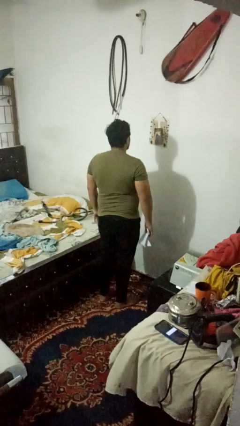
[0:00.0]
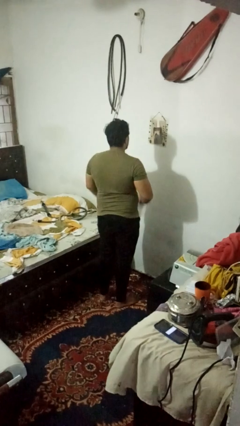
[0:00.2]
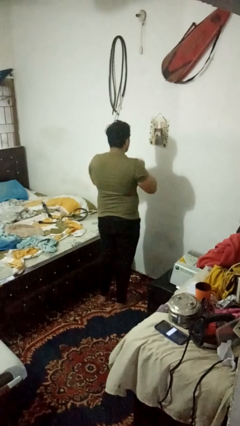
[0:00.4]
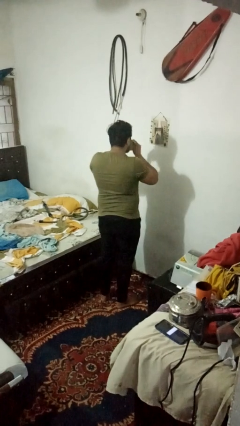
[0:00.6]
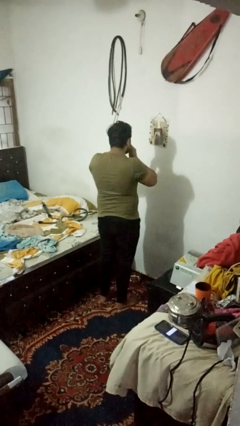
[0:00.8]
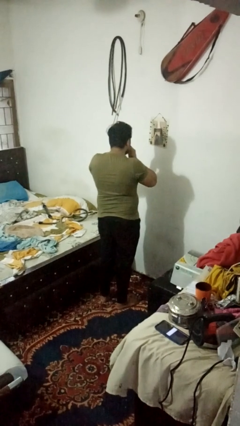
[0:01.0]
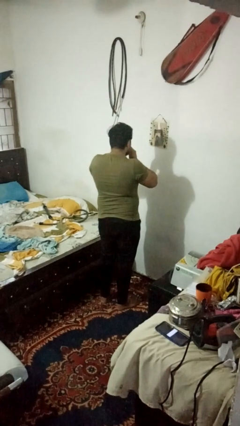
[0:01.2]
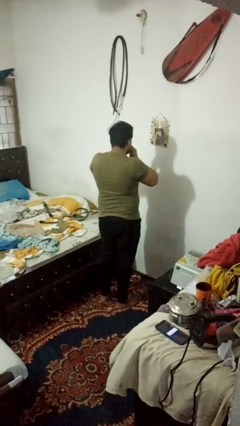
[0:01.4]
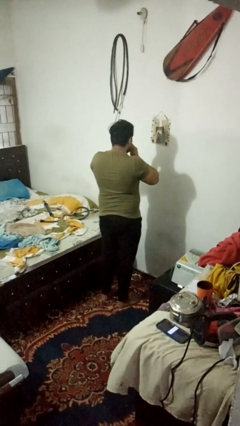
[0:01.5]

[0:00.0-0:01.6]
person blows nose

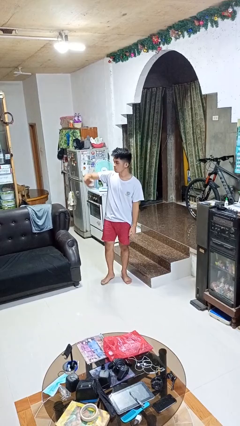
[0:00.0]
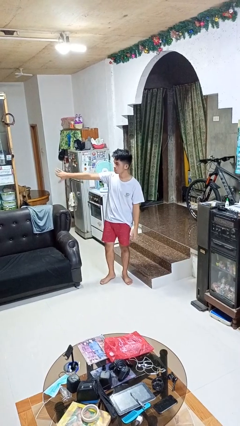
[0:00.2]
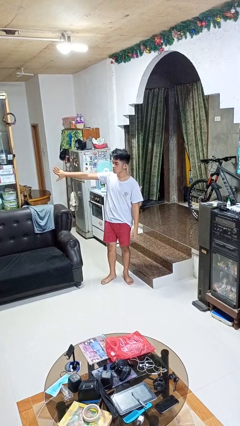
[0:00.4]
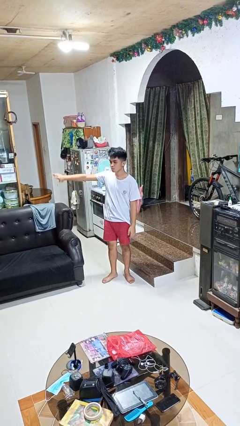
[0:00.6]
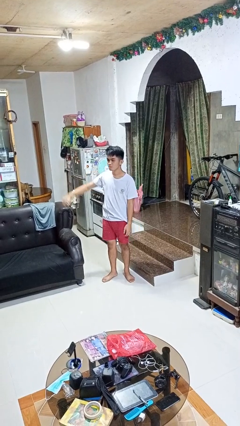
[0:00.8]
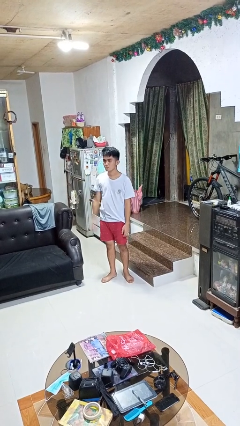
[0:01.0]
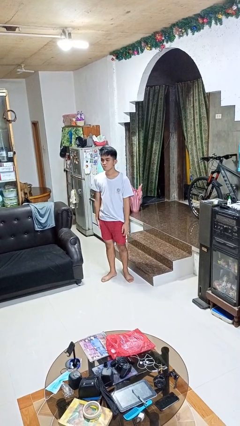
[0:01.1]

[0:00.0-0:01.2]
person gestures swipe right

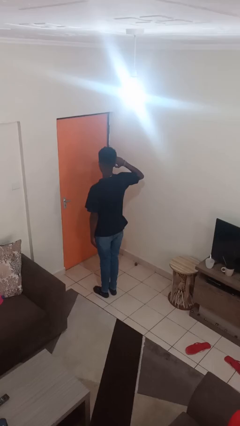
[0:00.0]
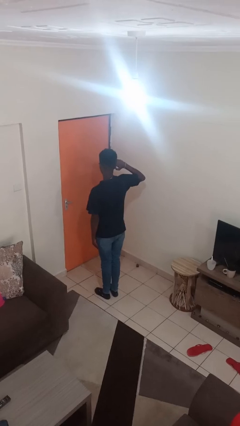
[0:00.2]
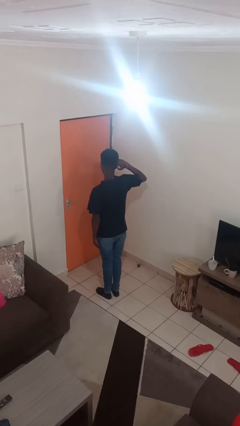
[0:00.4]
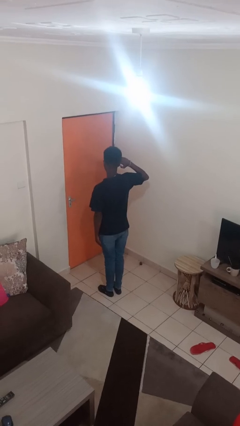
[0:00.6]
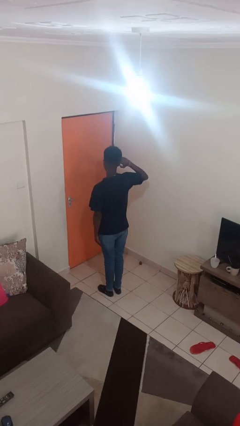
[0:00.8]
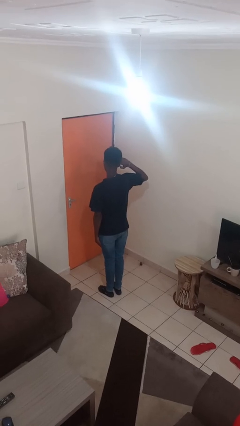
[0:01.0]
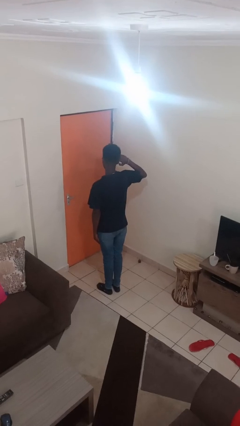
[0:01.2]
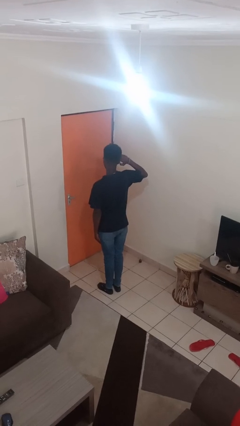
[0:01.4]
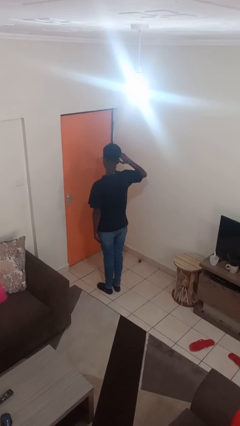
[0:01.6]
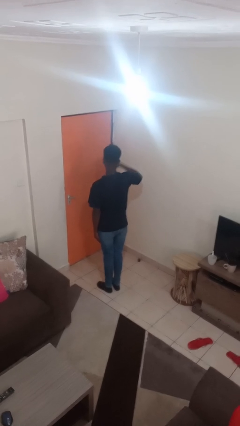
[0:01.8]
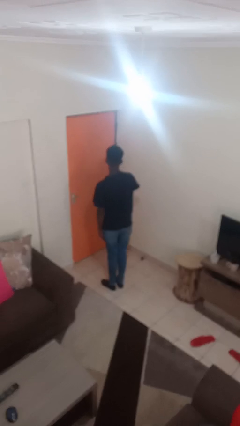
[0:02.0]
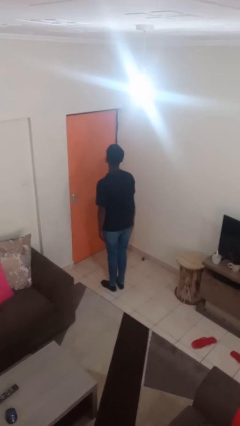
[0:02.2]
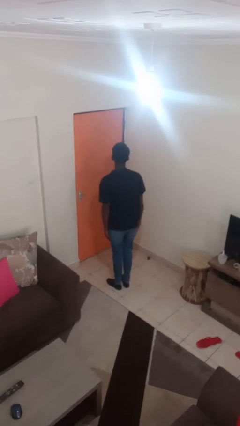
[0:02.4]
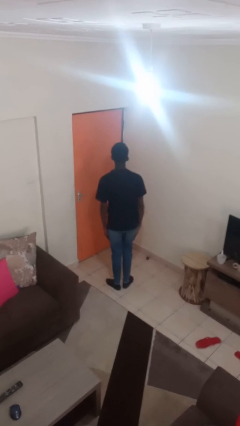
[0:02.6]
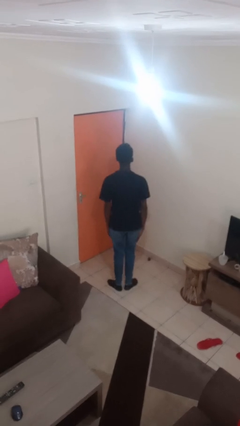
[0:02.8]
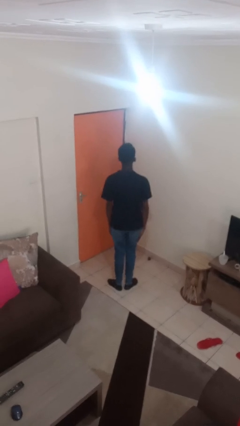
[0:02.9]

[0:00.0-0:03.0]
person salutes

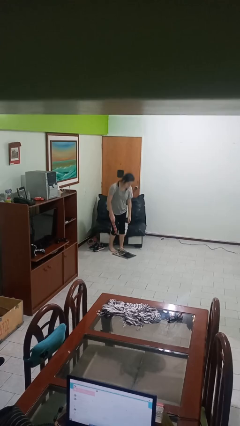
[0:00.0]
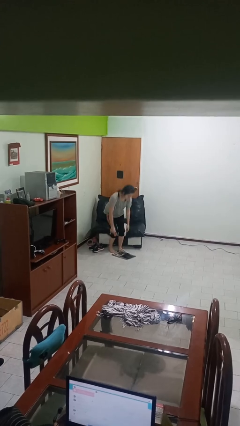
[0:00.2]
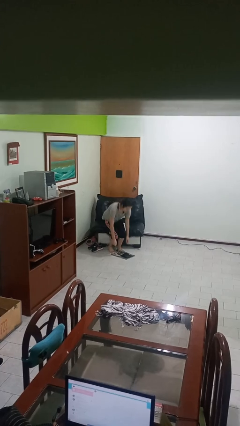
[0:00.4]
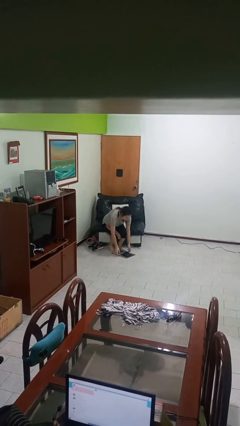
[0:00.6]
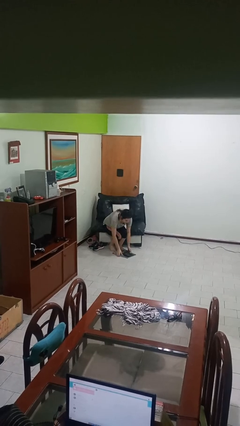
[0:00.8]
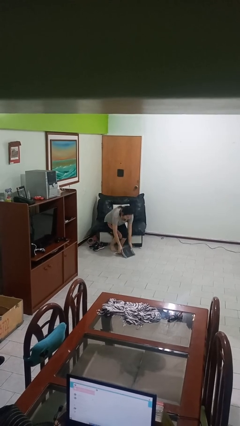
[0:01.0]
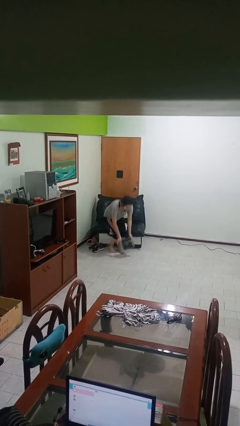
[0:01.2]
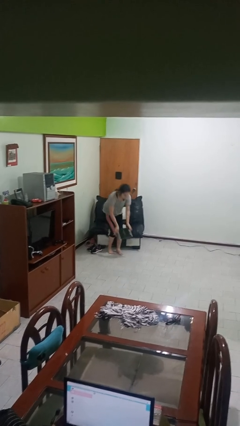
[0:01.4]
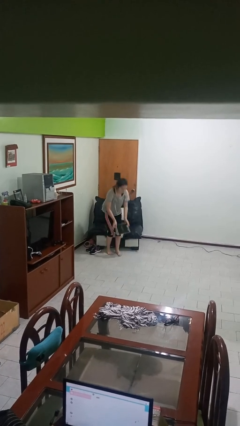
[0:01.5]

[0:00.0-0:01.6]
person picks up object from floor

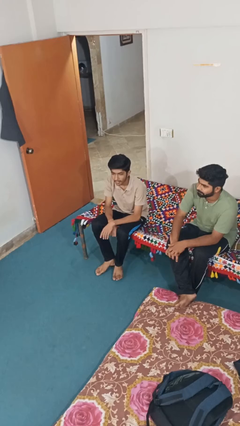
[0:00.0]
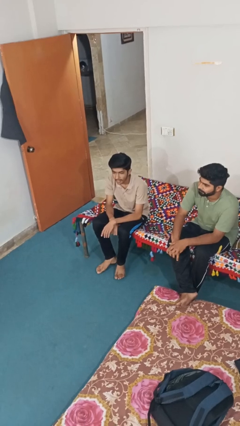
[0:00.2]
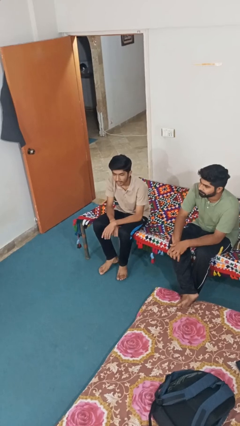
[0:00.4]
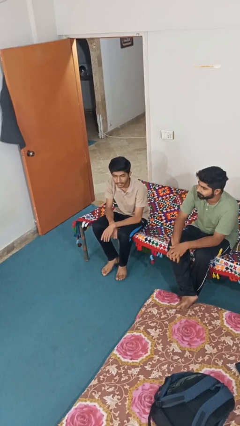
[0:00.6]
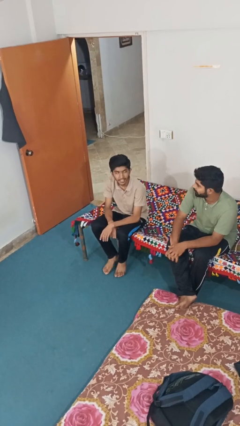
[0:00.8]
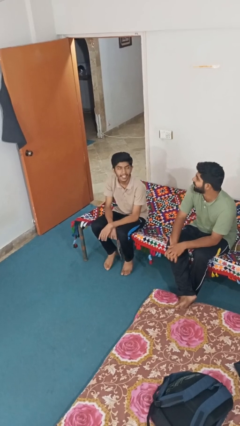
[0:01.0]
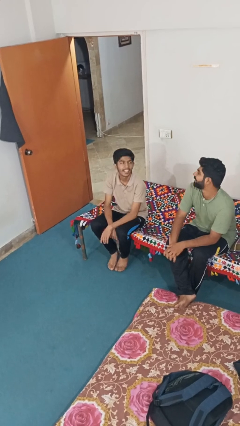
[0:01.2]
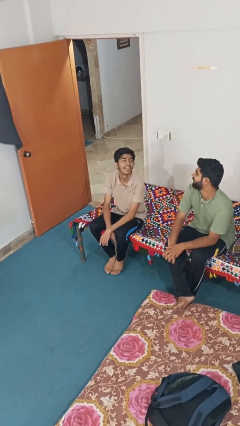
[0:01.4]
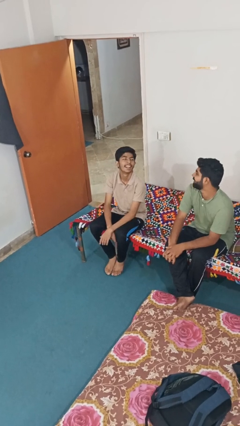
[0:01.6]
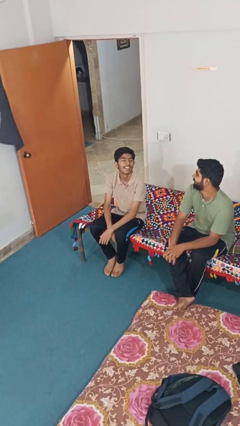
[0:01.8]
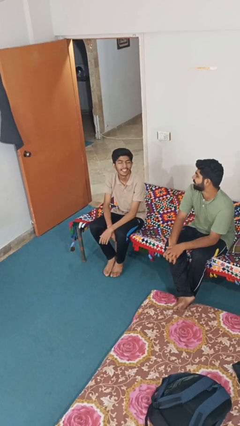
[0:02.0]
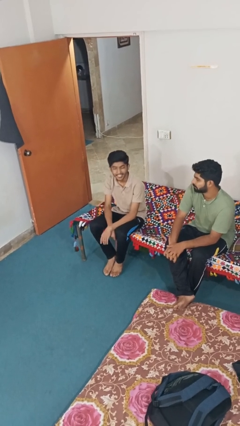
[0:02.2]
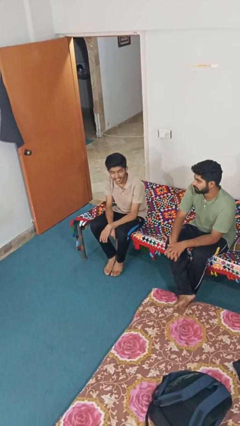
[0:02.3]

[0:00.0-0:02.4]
person laughs with person

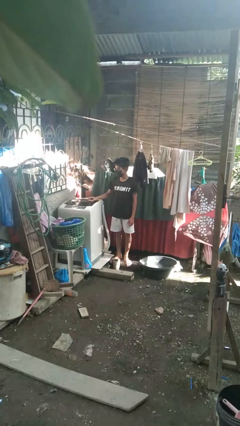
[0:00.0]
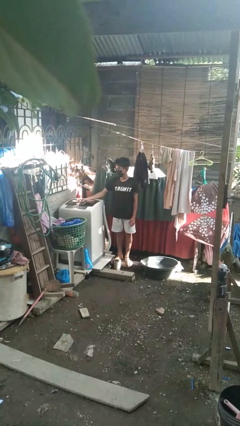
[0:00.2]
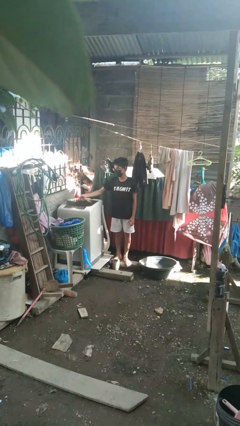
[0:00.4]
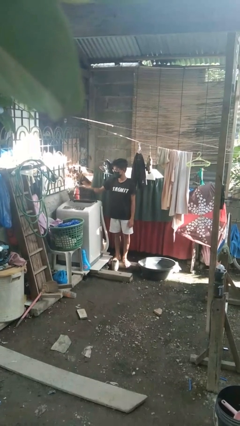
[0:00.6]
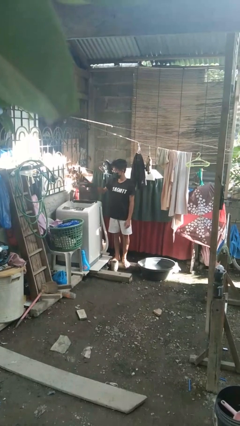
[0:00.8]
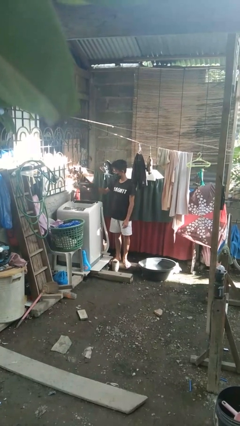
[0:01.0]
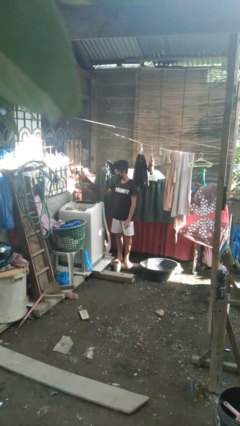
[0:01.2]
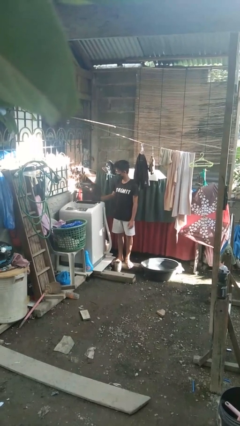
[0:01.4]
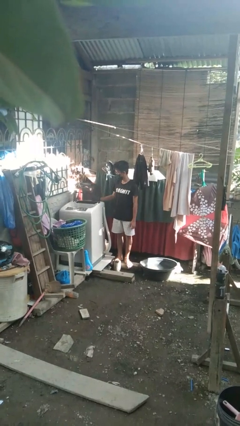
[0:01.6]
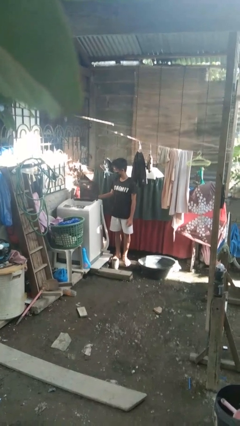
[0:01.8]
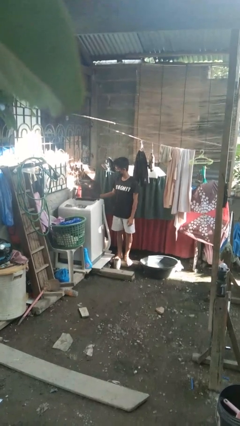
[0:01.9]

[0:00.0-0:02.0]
person opens clothes washer

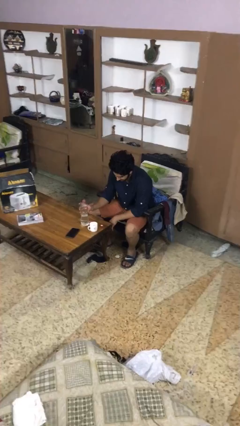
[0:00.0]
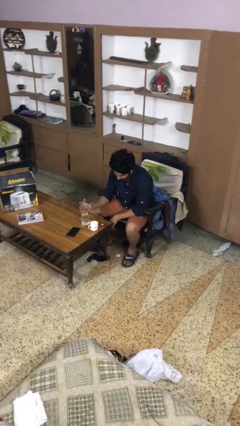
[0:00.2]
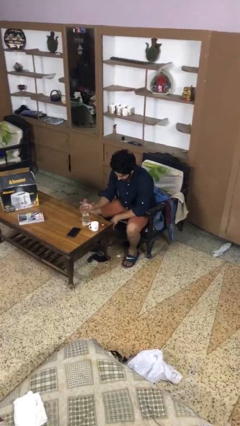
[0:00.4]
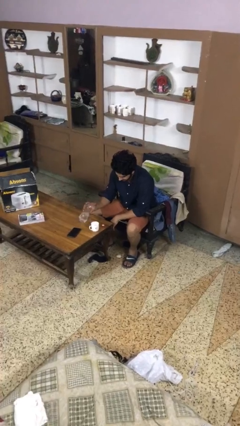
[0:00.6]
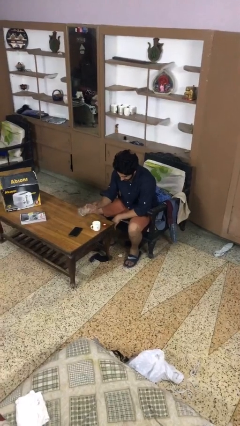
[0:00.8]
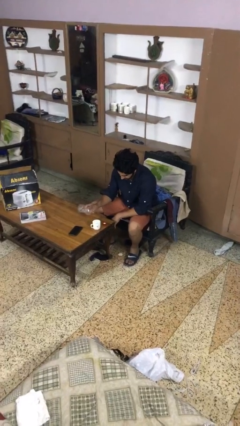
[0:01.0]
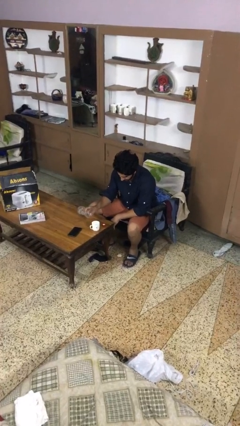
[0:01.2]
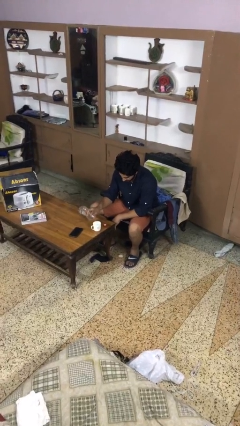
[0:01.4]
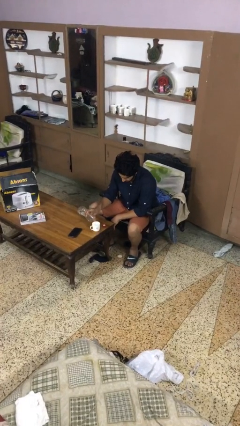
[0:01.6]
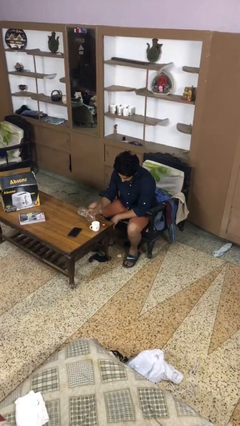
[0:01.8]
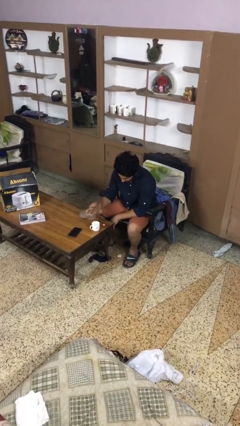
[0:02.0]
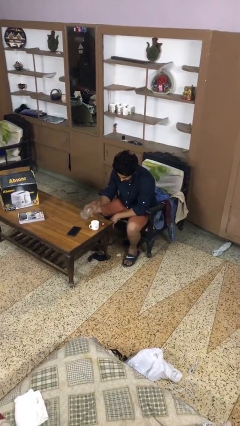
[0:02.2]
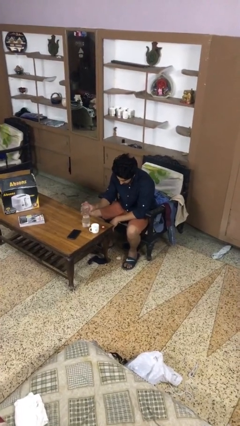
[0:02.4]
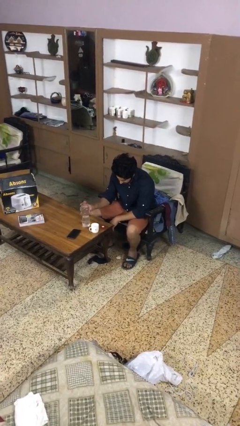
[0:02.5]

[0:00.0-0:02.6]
person pours liquid into cup

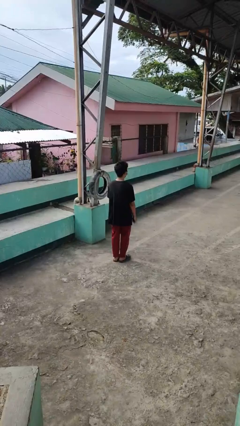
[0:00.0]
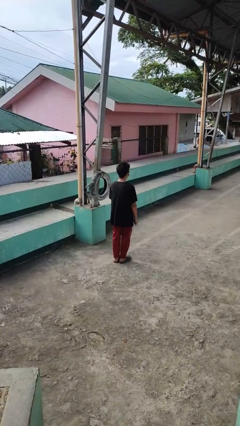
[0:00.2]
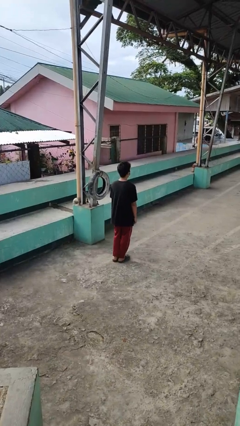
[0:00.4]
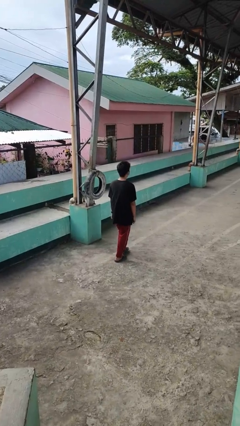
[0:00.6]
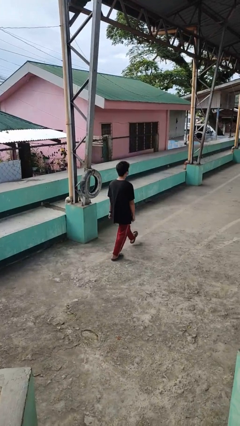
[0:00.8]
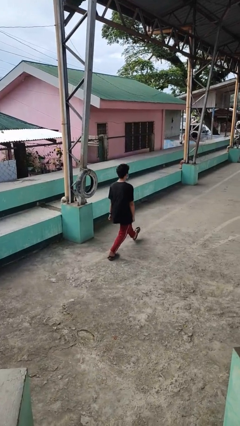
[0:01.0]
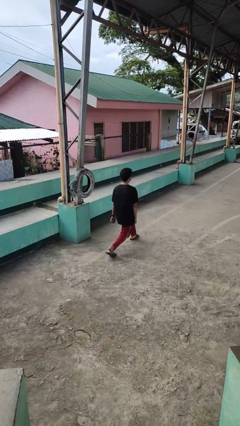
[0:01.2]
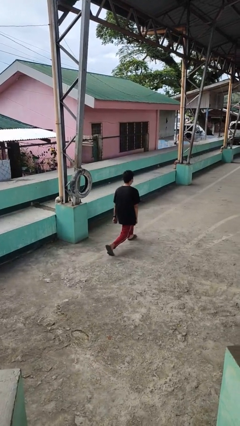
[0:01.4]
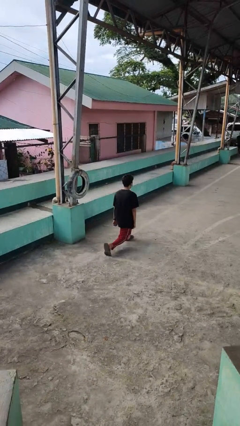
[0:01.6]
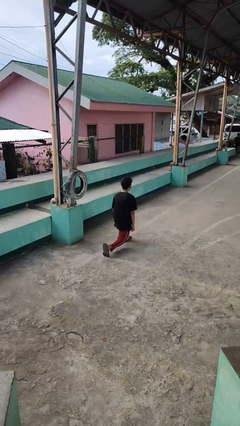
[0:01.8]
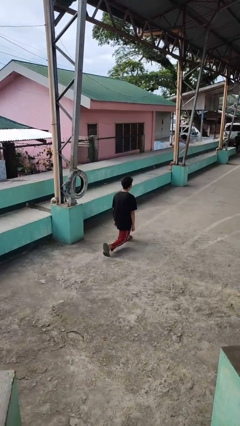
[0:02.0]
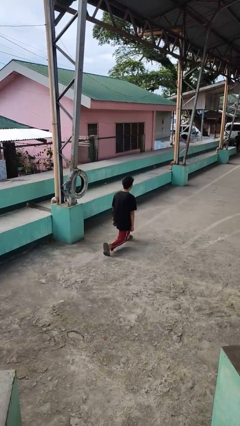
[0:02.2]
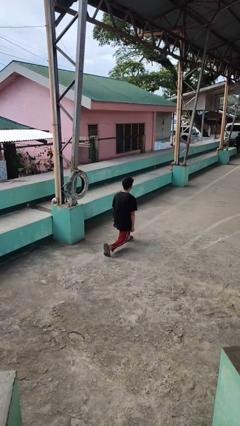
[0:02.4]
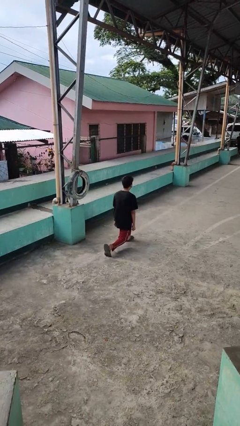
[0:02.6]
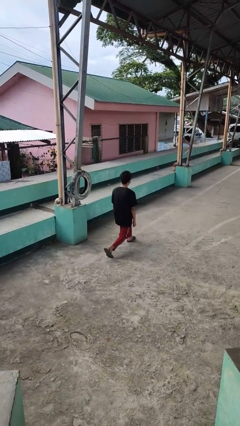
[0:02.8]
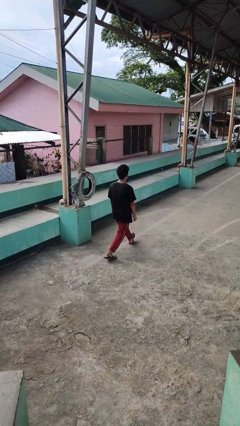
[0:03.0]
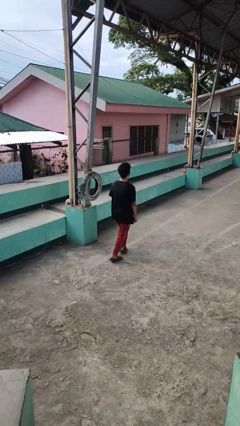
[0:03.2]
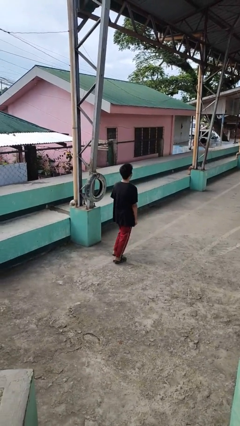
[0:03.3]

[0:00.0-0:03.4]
person exercises with lunges
